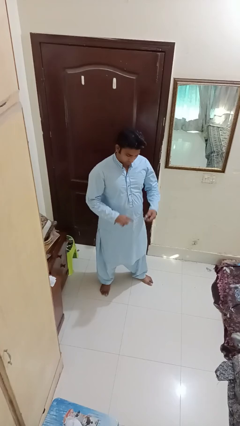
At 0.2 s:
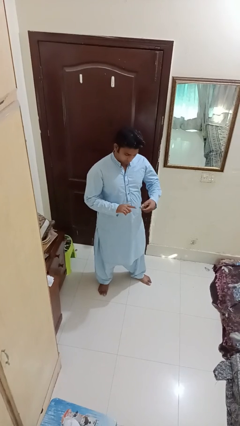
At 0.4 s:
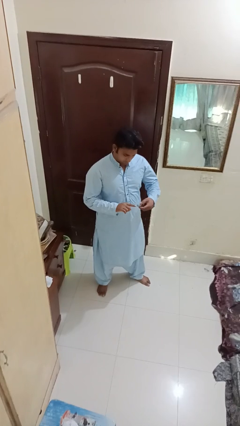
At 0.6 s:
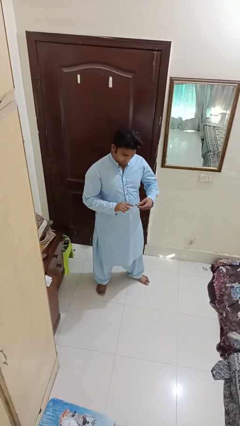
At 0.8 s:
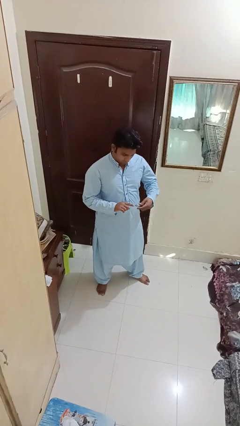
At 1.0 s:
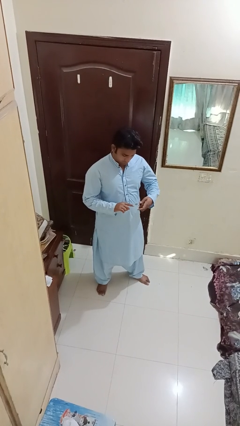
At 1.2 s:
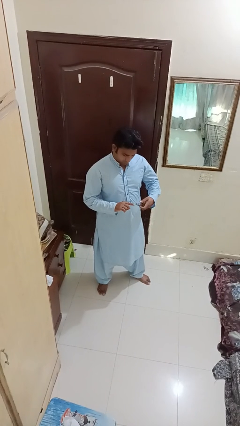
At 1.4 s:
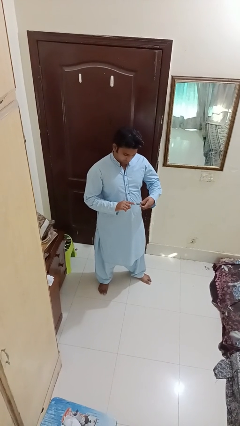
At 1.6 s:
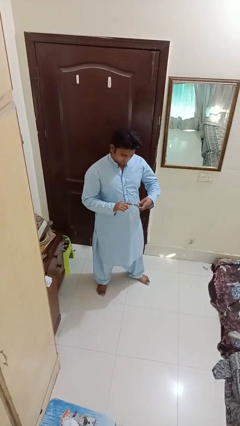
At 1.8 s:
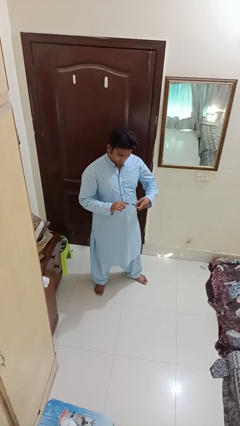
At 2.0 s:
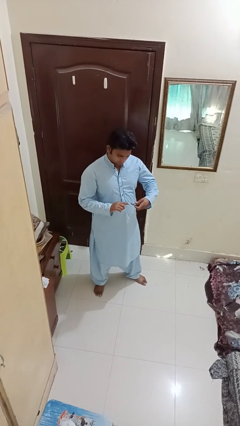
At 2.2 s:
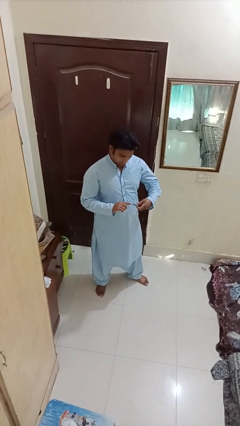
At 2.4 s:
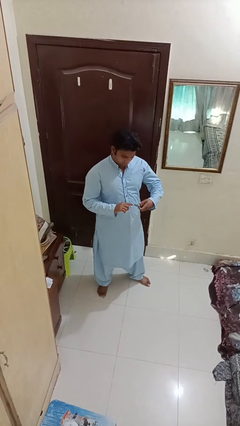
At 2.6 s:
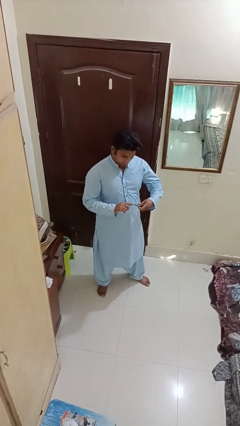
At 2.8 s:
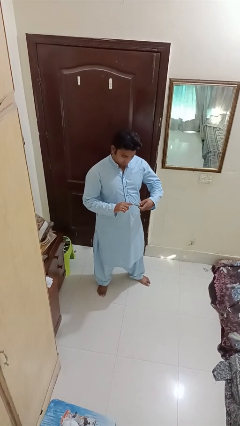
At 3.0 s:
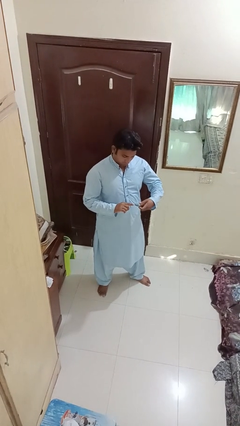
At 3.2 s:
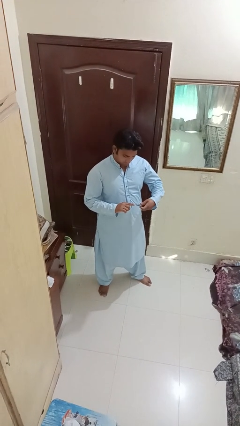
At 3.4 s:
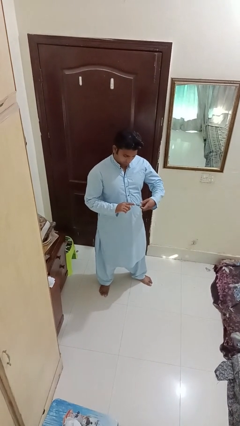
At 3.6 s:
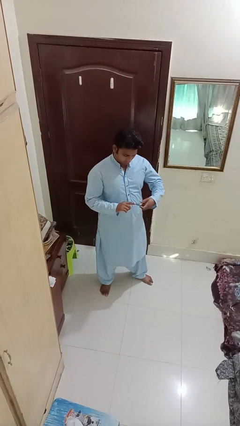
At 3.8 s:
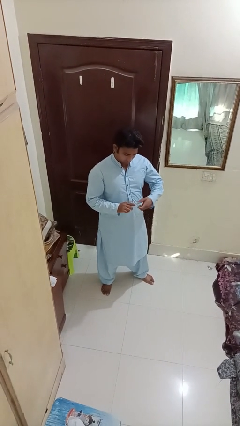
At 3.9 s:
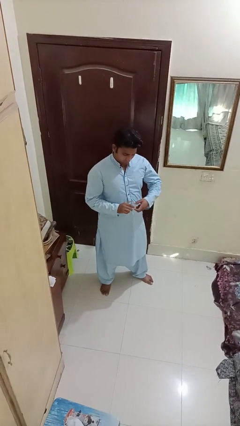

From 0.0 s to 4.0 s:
person clips fingernails

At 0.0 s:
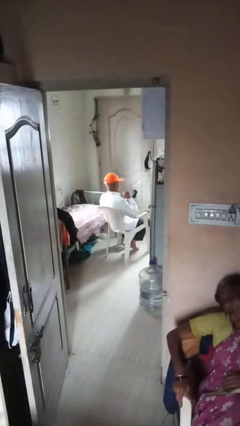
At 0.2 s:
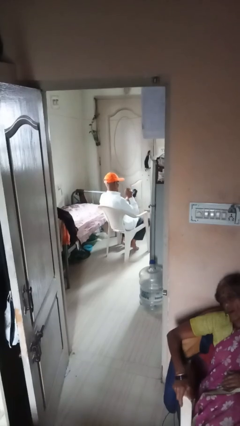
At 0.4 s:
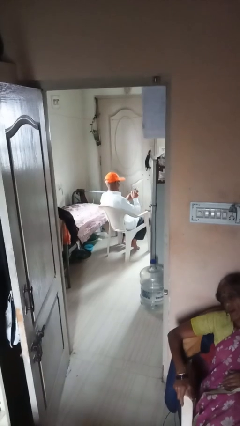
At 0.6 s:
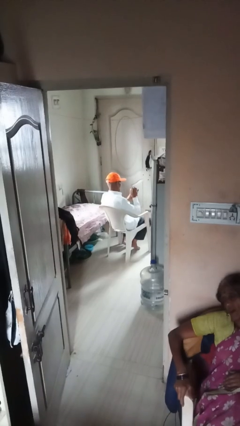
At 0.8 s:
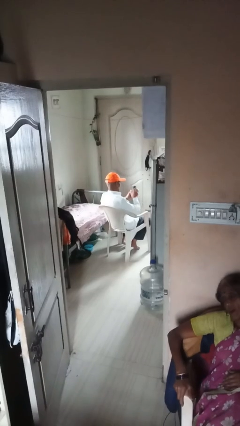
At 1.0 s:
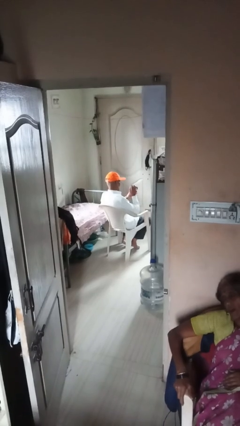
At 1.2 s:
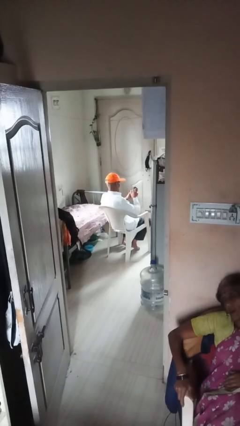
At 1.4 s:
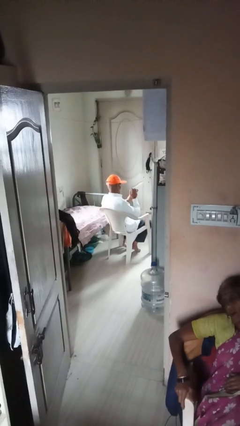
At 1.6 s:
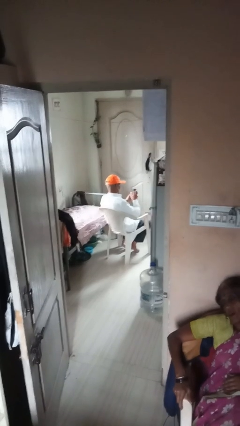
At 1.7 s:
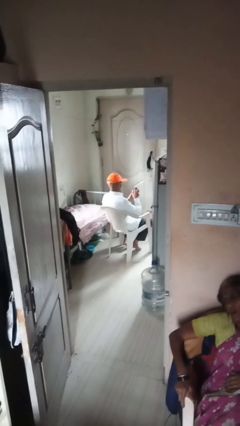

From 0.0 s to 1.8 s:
person taps object with finger

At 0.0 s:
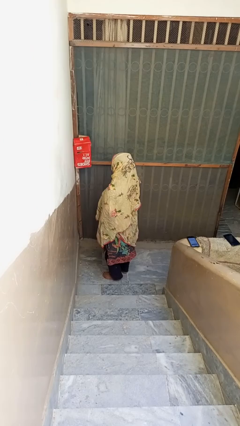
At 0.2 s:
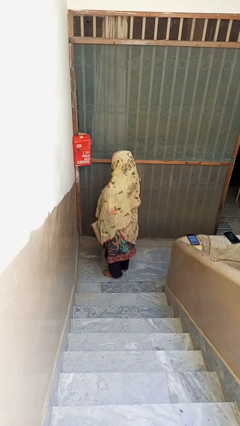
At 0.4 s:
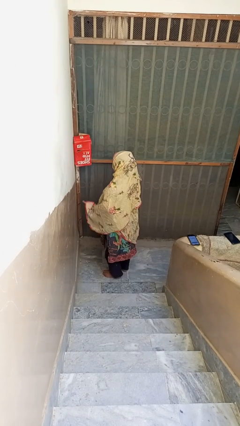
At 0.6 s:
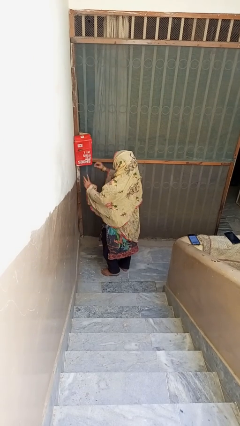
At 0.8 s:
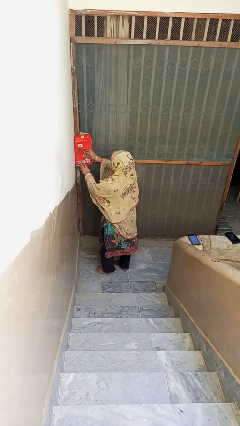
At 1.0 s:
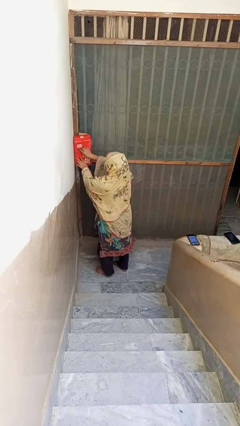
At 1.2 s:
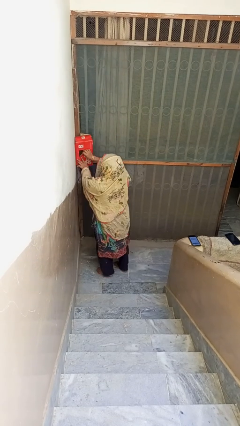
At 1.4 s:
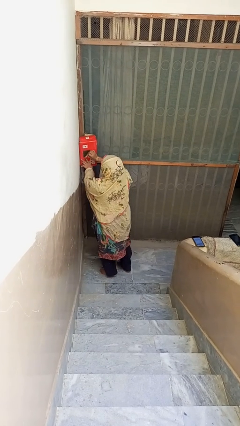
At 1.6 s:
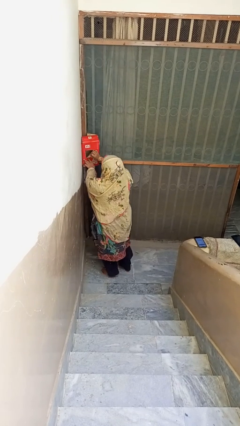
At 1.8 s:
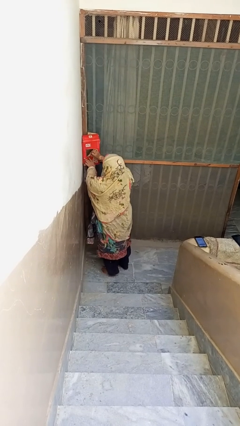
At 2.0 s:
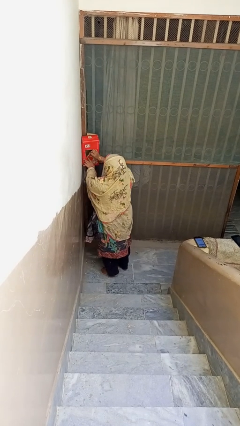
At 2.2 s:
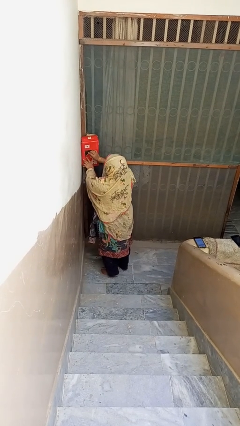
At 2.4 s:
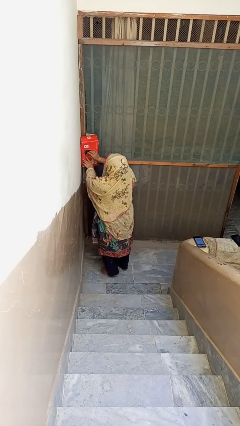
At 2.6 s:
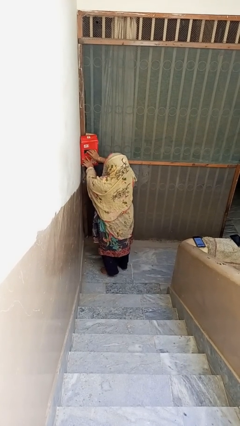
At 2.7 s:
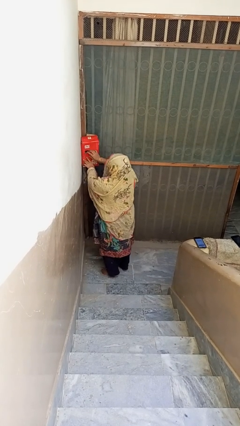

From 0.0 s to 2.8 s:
person opens mailbox

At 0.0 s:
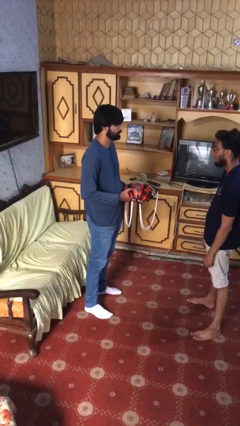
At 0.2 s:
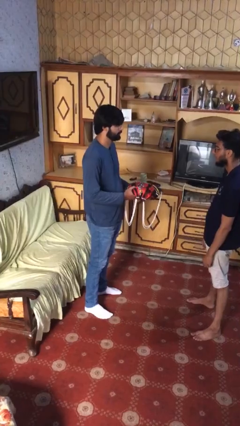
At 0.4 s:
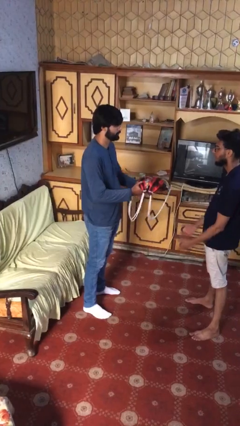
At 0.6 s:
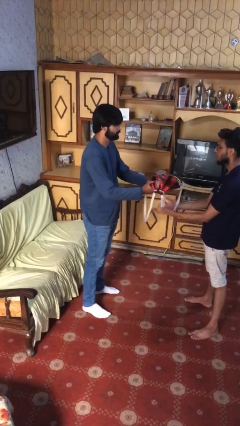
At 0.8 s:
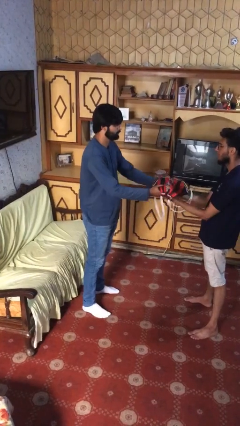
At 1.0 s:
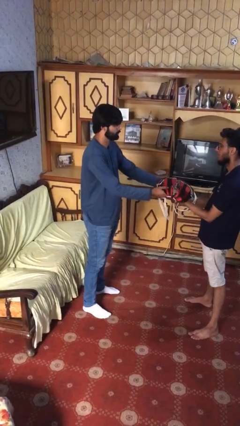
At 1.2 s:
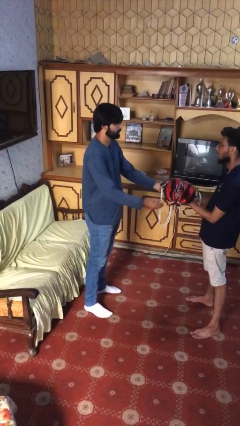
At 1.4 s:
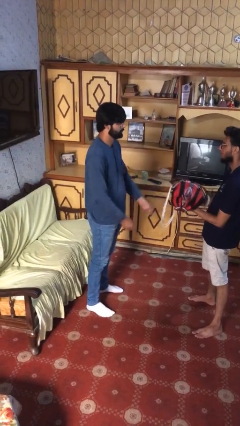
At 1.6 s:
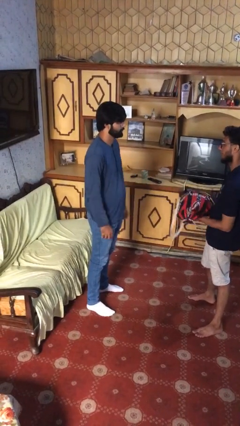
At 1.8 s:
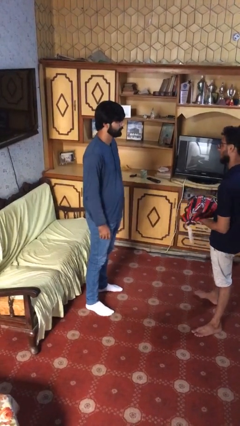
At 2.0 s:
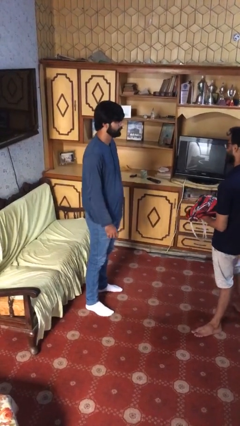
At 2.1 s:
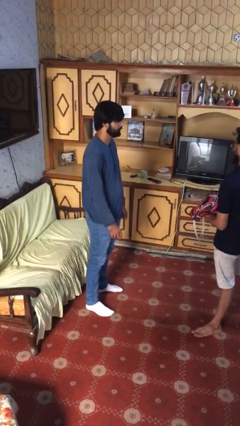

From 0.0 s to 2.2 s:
person transfers object to person

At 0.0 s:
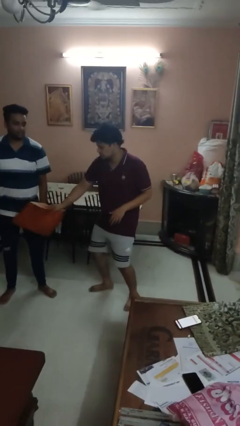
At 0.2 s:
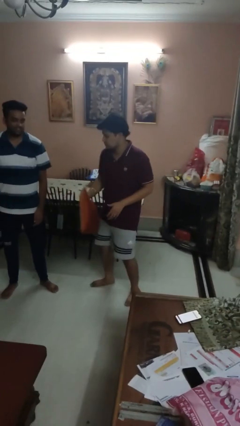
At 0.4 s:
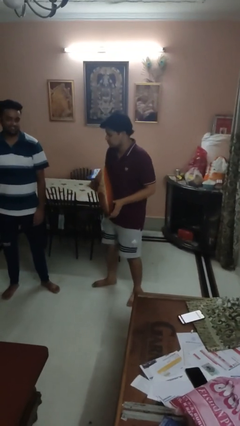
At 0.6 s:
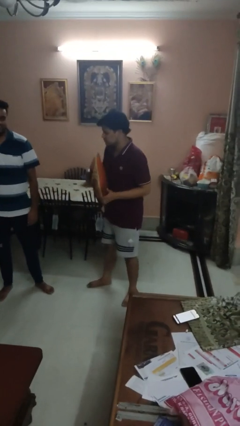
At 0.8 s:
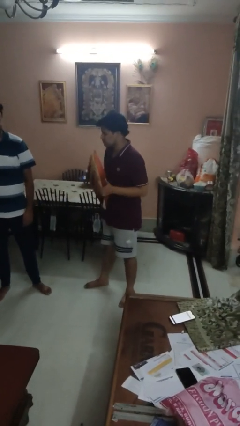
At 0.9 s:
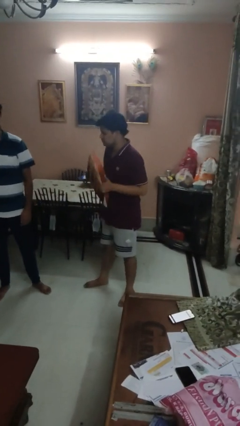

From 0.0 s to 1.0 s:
person hits person with pillow

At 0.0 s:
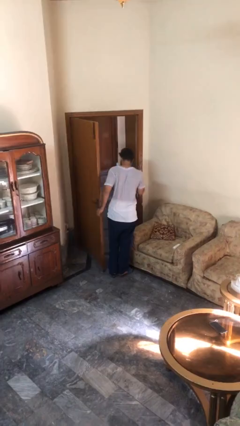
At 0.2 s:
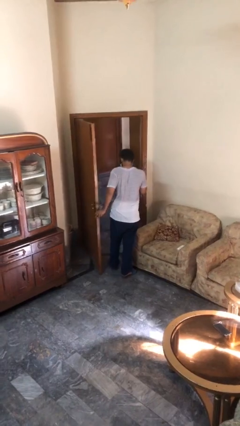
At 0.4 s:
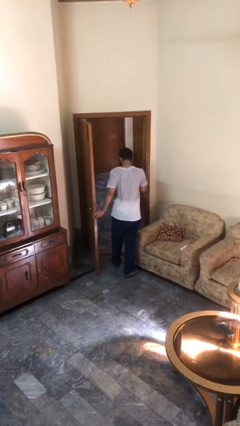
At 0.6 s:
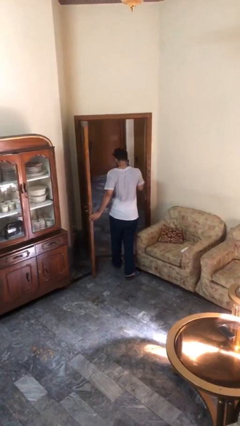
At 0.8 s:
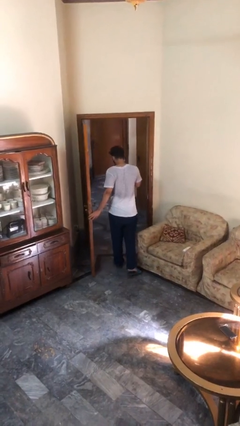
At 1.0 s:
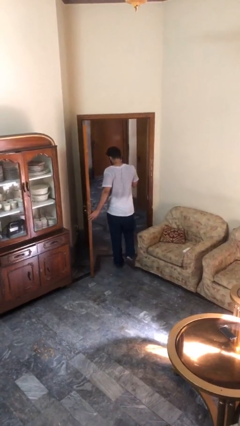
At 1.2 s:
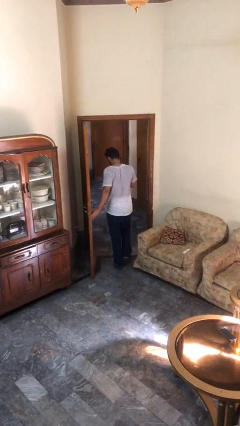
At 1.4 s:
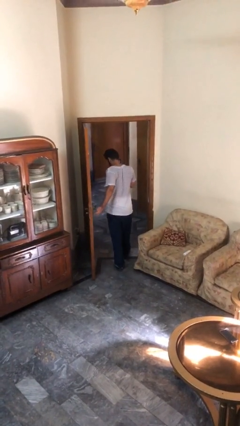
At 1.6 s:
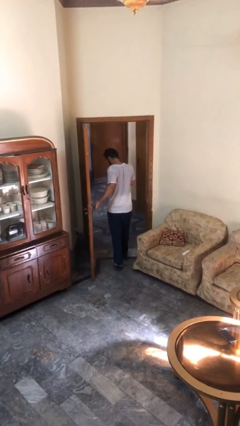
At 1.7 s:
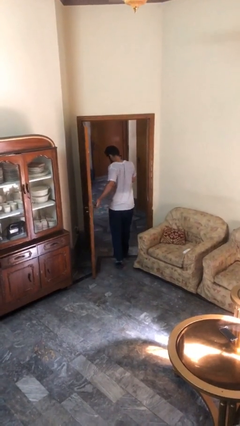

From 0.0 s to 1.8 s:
person exits scene through structure

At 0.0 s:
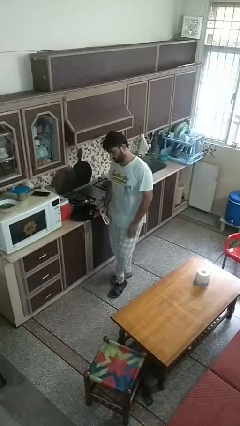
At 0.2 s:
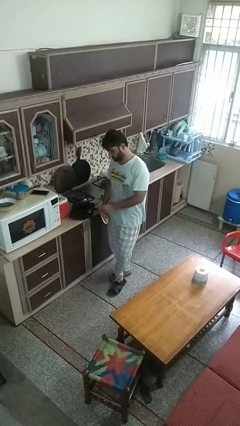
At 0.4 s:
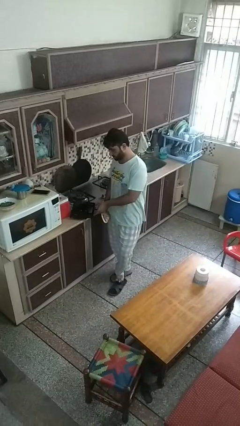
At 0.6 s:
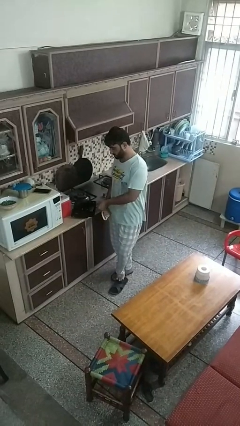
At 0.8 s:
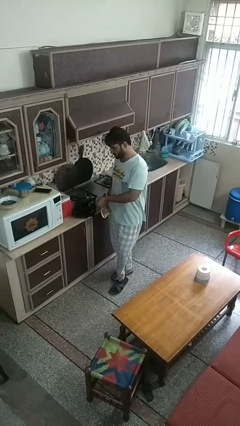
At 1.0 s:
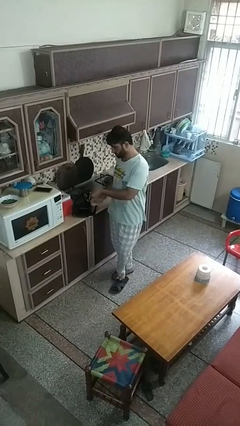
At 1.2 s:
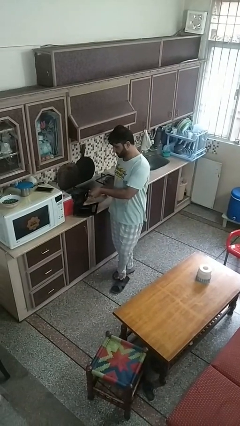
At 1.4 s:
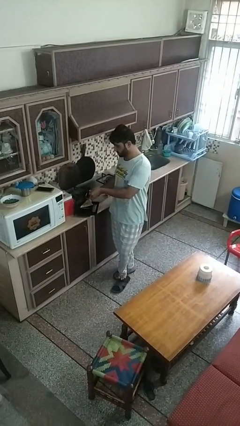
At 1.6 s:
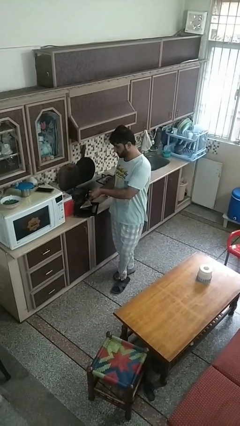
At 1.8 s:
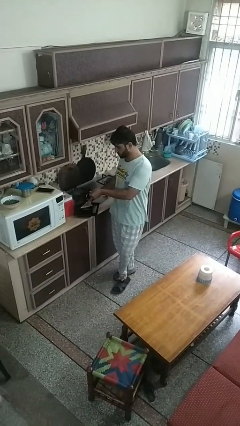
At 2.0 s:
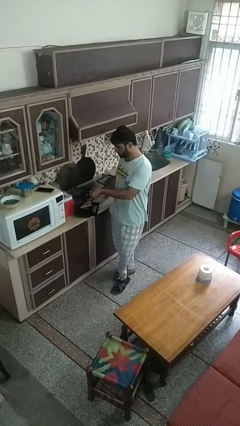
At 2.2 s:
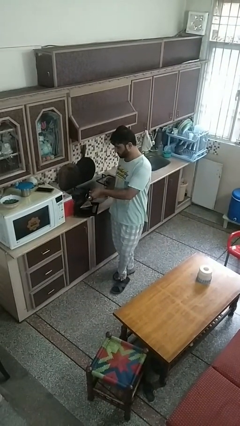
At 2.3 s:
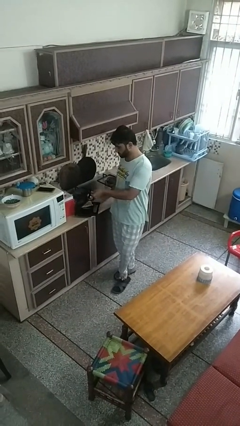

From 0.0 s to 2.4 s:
person puts object into toaster

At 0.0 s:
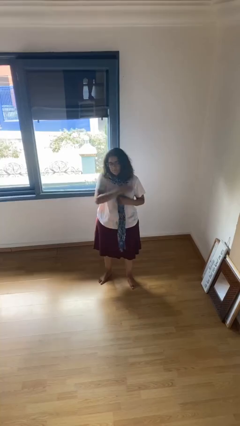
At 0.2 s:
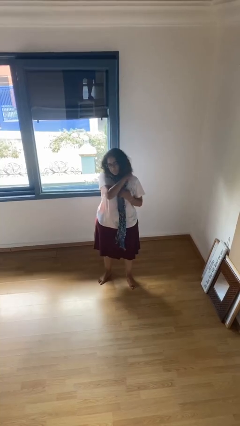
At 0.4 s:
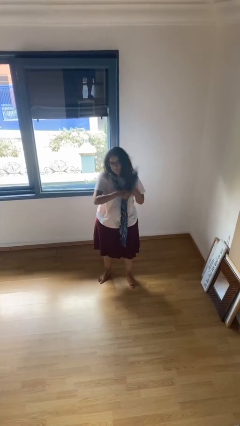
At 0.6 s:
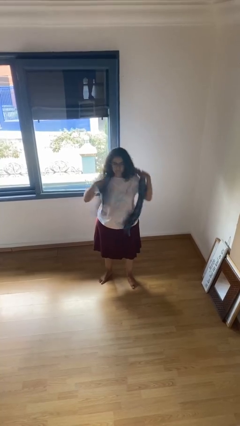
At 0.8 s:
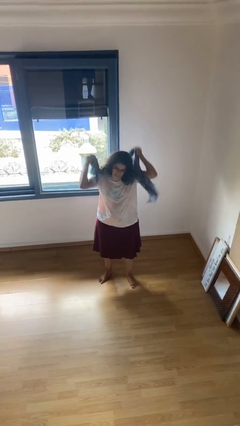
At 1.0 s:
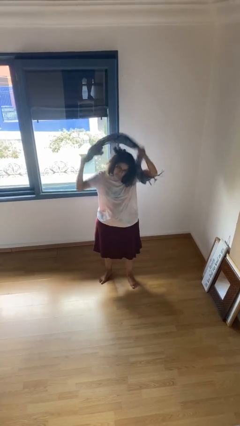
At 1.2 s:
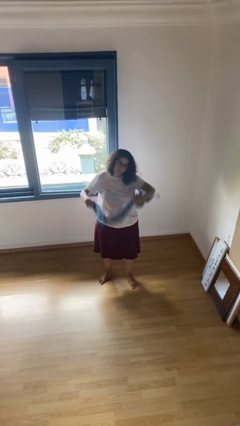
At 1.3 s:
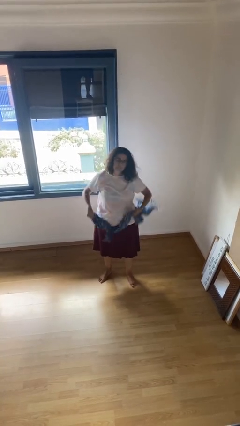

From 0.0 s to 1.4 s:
person takes off scarf
